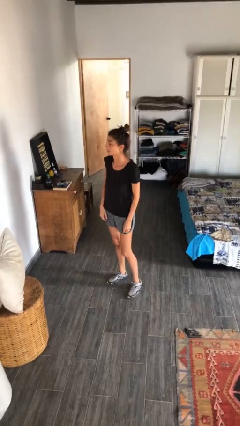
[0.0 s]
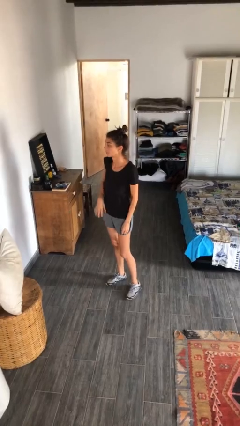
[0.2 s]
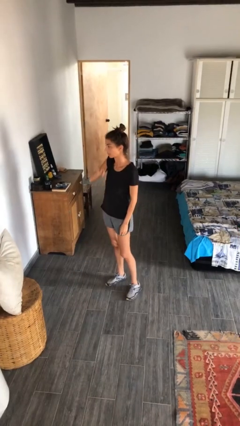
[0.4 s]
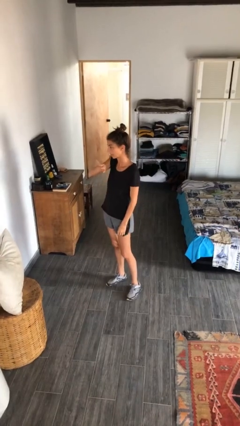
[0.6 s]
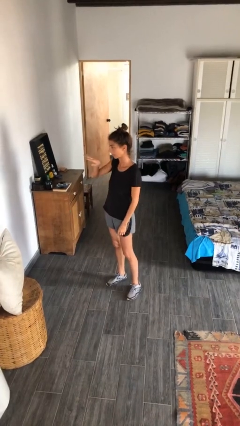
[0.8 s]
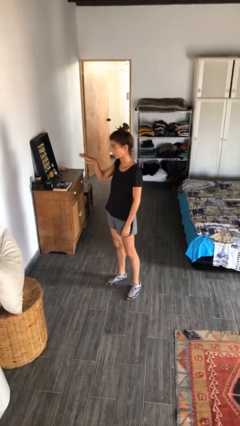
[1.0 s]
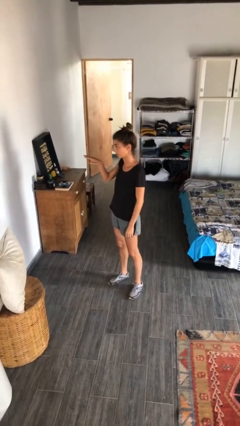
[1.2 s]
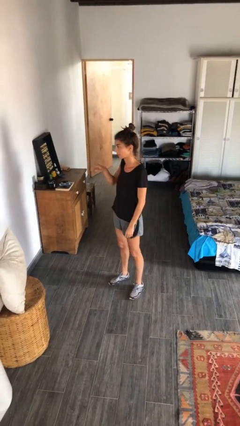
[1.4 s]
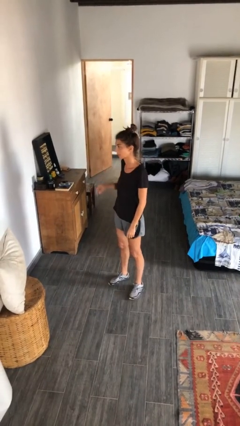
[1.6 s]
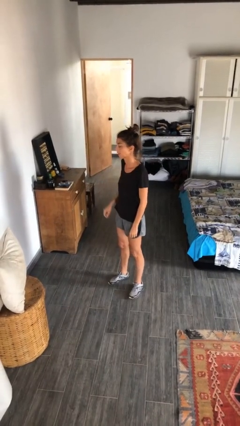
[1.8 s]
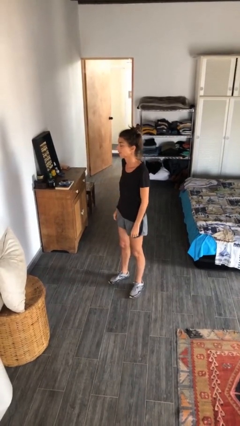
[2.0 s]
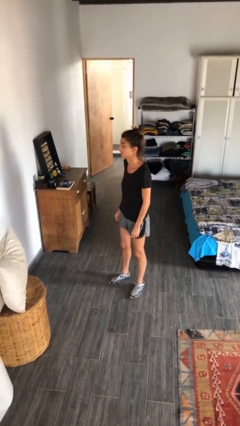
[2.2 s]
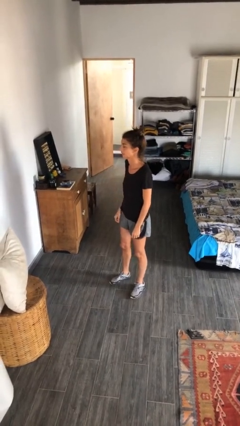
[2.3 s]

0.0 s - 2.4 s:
person gestures swipe right

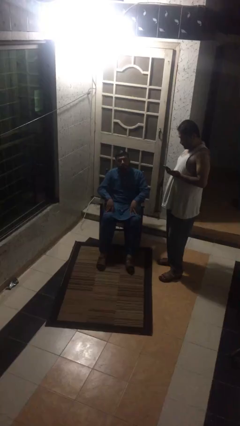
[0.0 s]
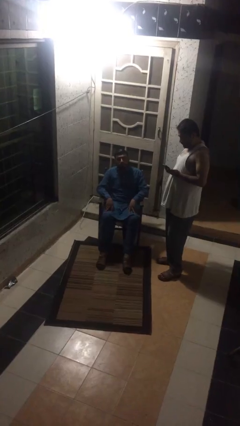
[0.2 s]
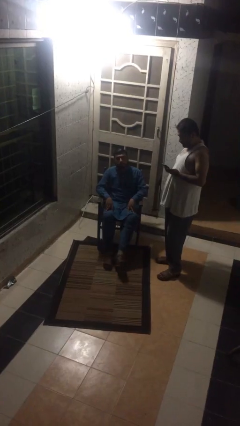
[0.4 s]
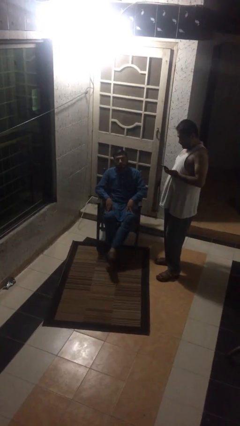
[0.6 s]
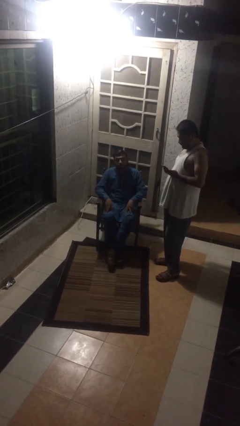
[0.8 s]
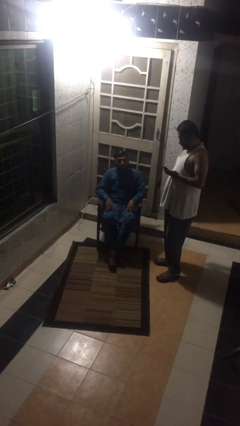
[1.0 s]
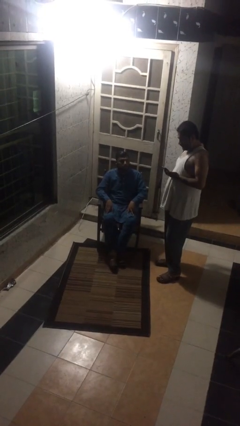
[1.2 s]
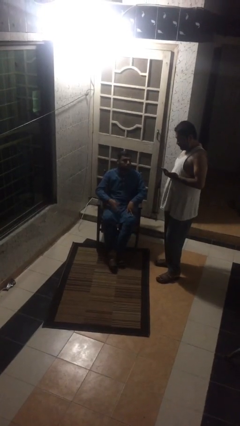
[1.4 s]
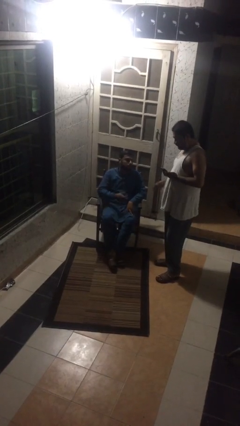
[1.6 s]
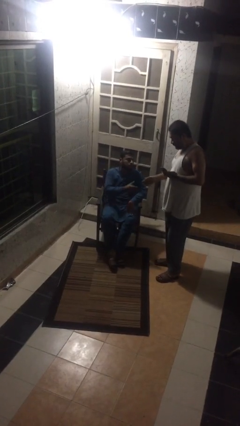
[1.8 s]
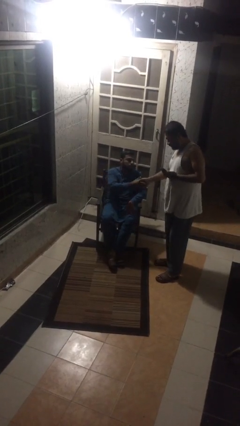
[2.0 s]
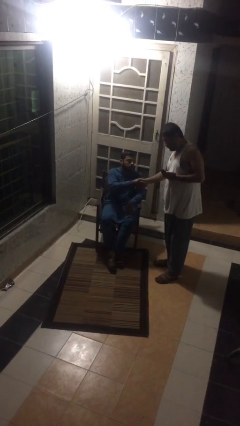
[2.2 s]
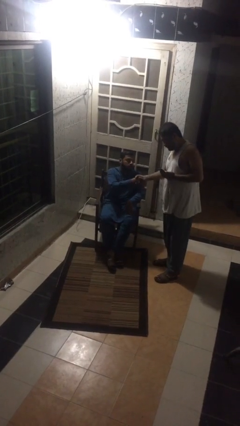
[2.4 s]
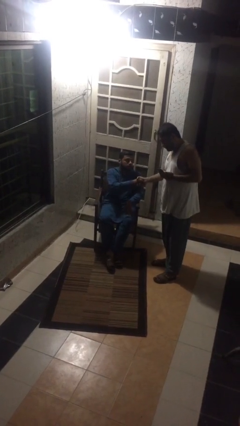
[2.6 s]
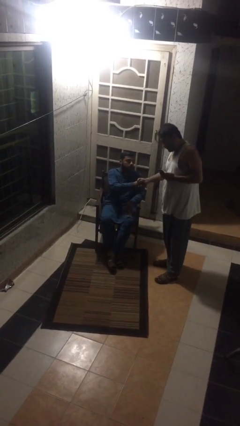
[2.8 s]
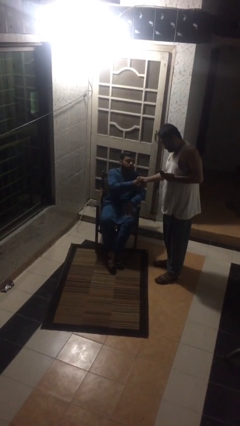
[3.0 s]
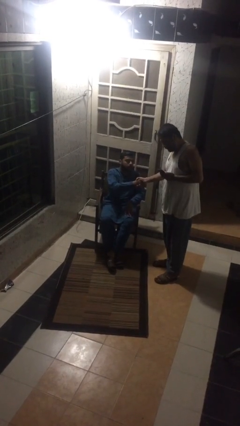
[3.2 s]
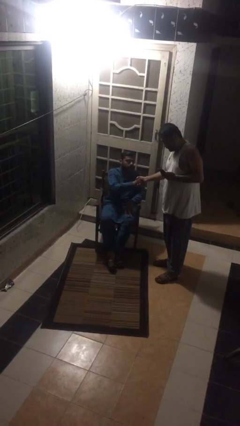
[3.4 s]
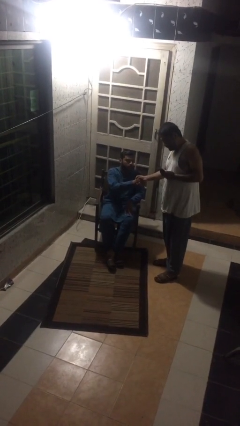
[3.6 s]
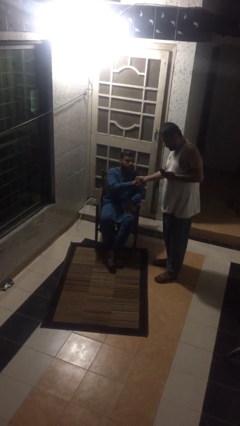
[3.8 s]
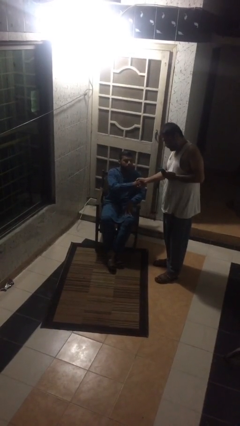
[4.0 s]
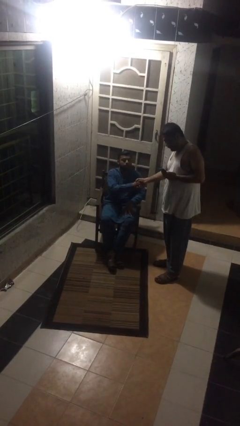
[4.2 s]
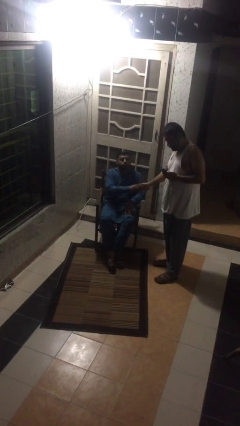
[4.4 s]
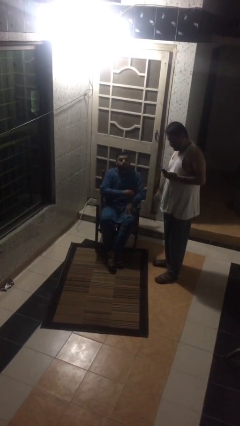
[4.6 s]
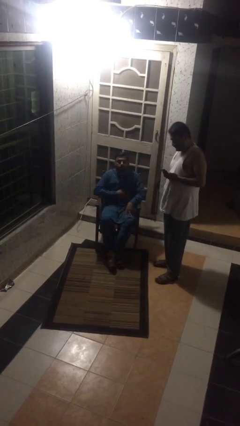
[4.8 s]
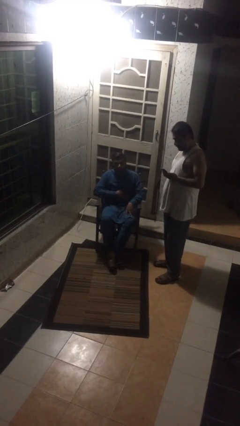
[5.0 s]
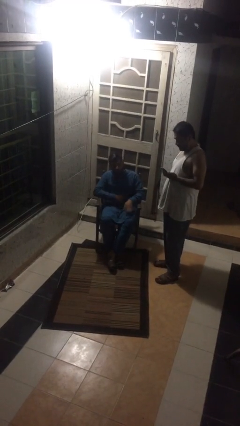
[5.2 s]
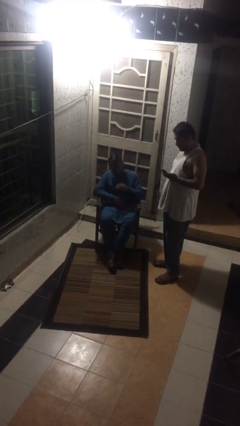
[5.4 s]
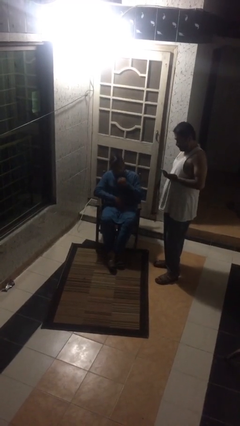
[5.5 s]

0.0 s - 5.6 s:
person shakes hand

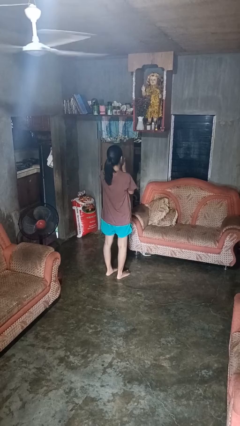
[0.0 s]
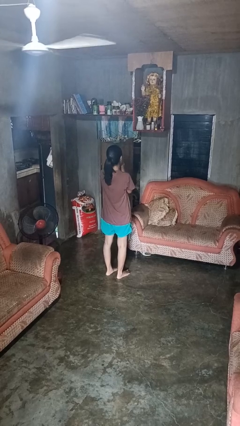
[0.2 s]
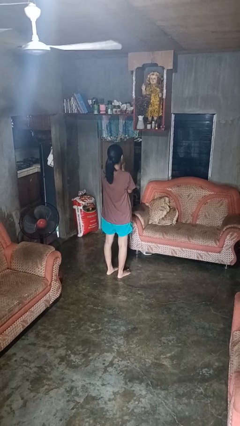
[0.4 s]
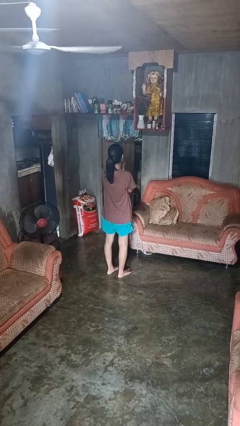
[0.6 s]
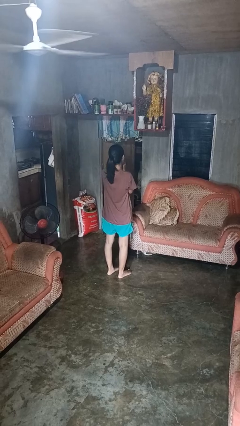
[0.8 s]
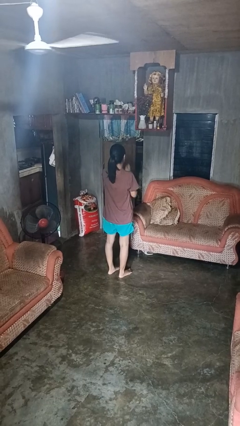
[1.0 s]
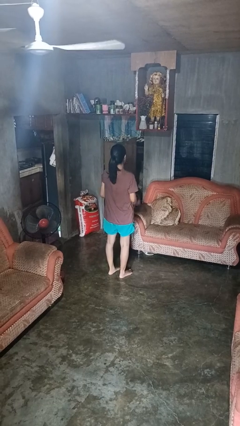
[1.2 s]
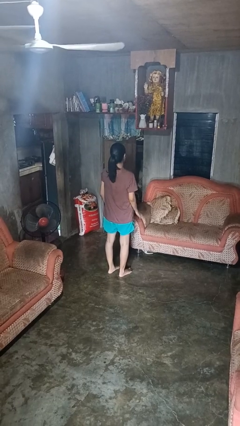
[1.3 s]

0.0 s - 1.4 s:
person prays

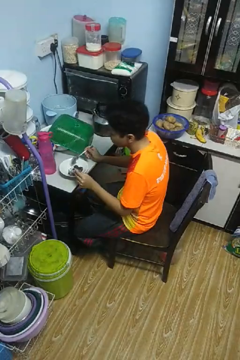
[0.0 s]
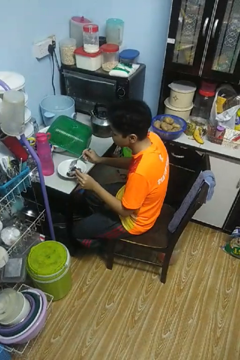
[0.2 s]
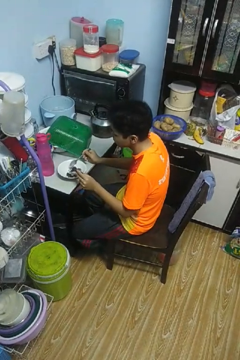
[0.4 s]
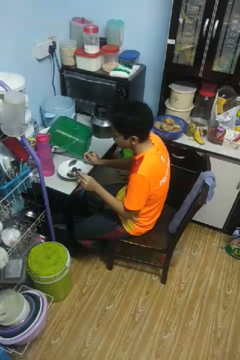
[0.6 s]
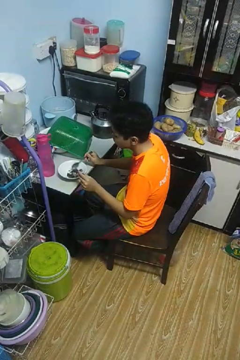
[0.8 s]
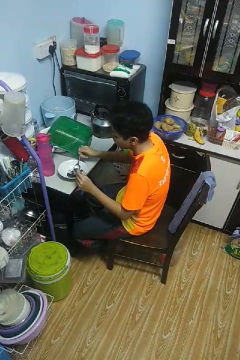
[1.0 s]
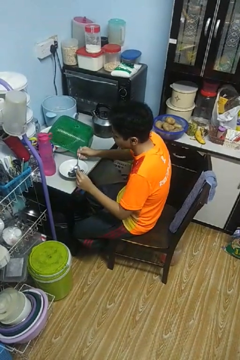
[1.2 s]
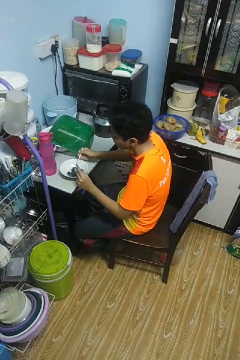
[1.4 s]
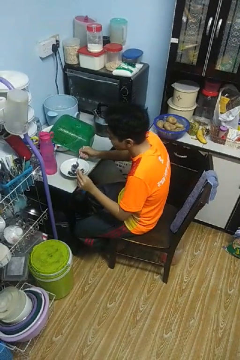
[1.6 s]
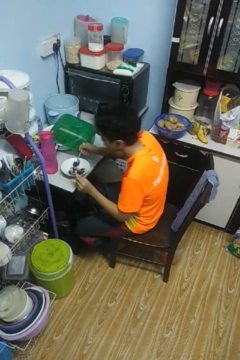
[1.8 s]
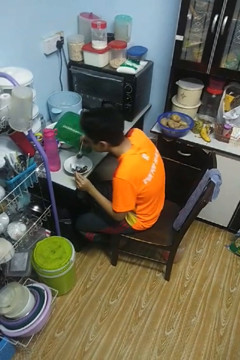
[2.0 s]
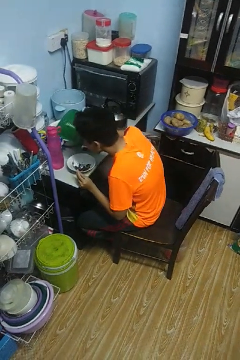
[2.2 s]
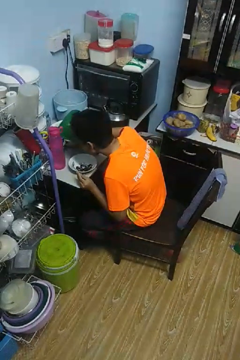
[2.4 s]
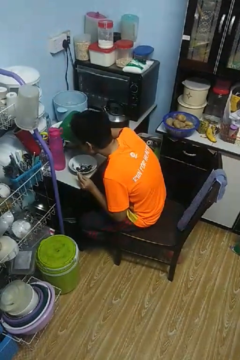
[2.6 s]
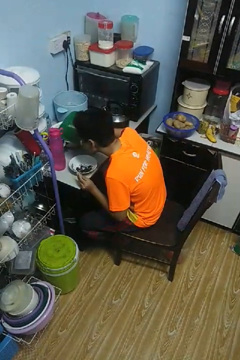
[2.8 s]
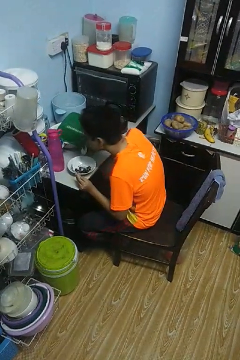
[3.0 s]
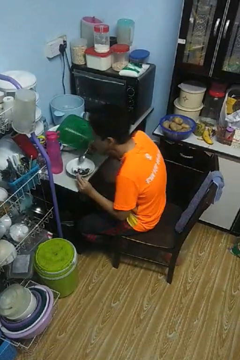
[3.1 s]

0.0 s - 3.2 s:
person eats with utensil

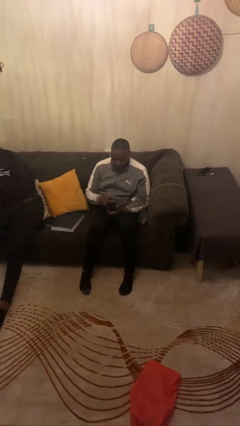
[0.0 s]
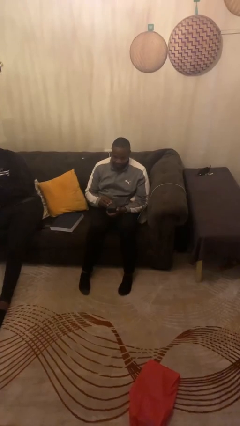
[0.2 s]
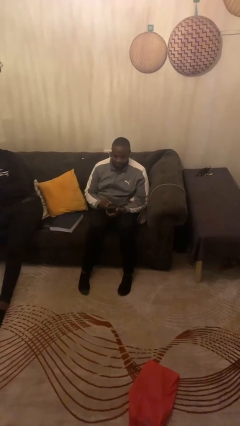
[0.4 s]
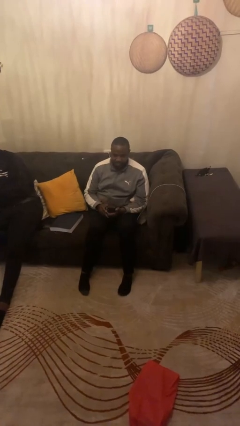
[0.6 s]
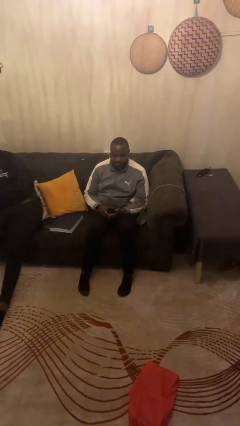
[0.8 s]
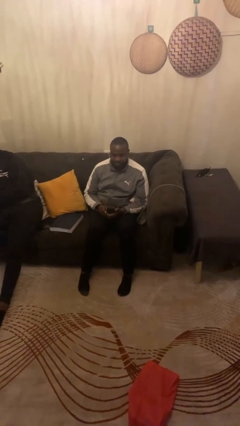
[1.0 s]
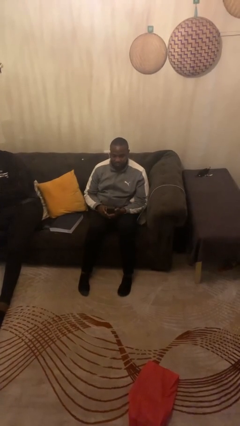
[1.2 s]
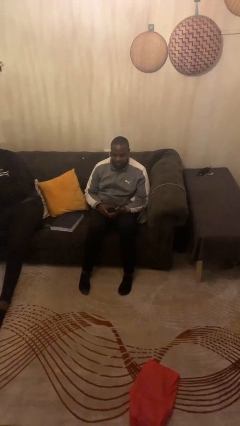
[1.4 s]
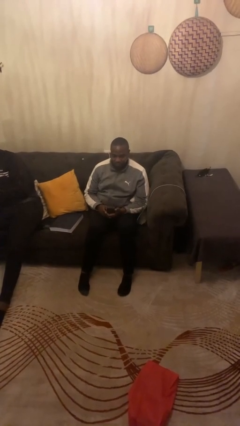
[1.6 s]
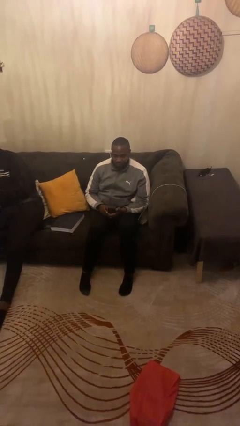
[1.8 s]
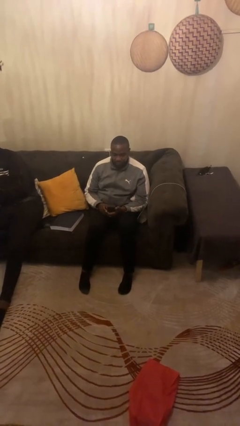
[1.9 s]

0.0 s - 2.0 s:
person closes jewelry box

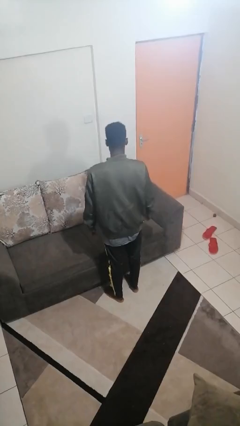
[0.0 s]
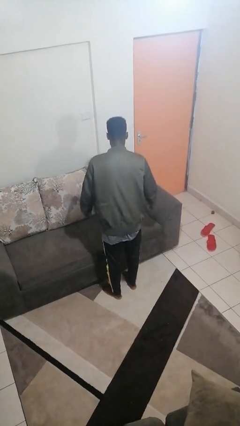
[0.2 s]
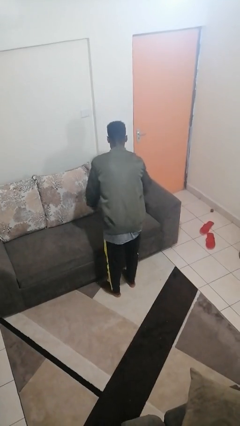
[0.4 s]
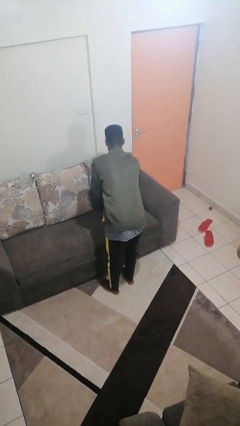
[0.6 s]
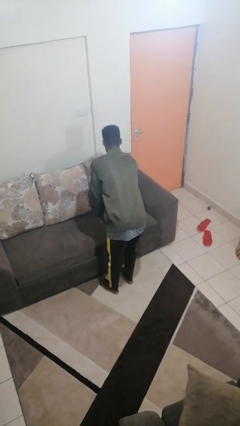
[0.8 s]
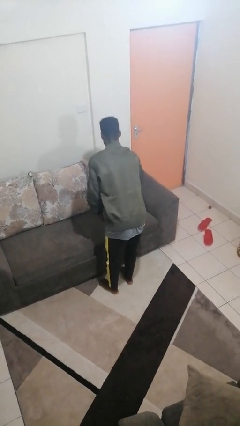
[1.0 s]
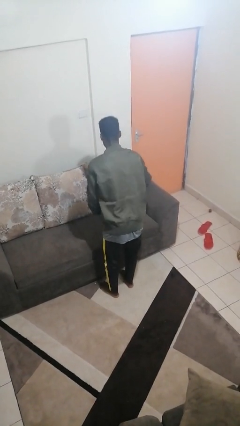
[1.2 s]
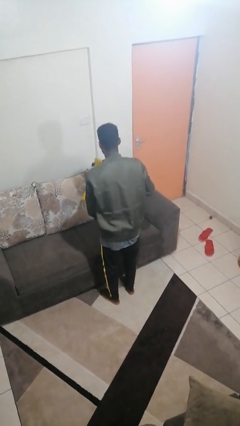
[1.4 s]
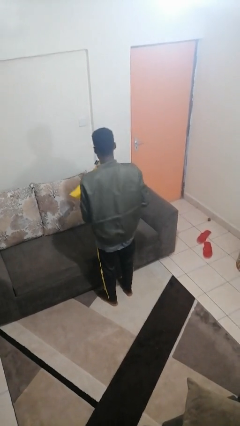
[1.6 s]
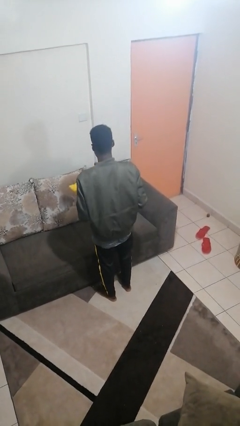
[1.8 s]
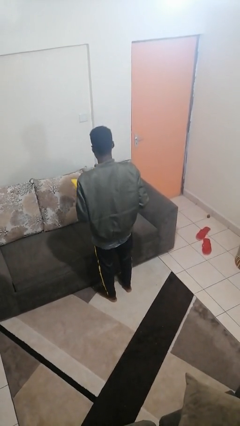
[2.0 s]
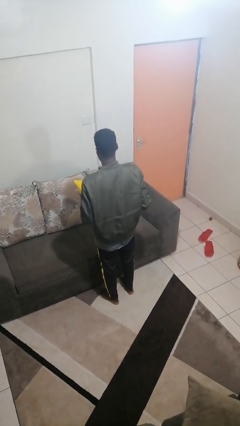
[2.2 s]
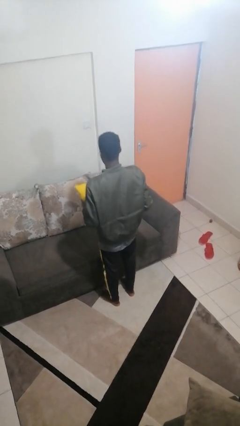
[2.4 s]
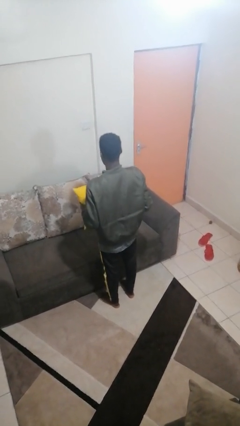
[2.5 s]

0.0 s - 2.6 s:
person picks up object from couch

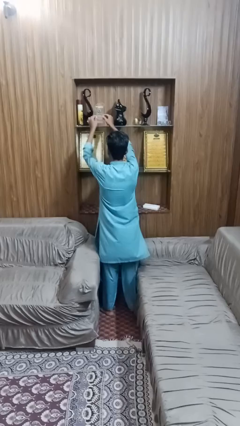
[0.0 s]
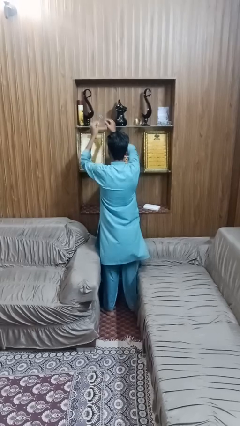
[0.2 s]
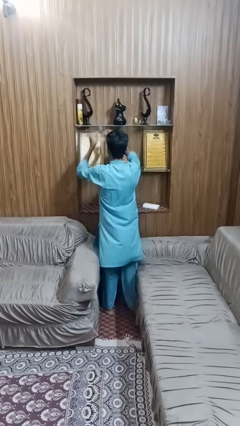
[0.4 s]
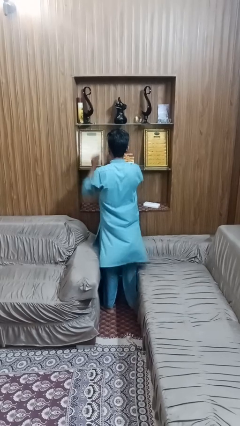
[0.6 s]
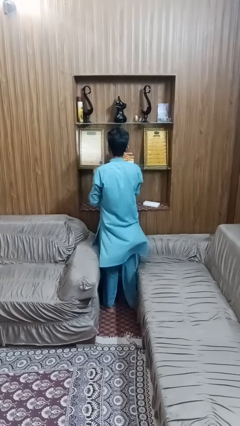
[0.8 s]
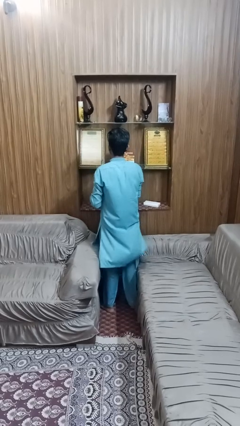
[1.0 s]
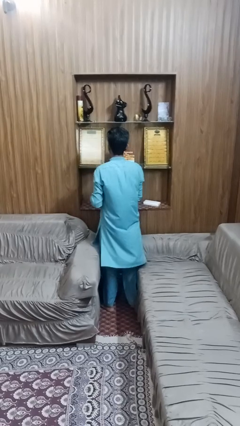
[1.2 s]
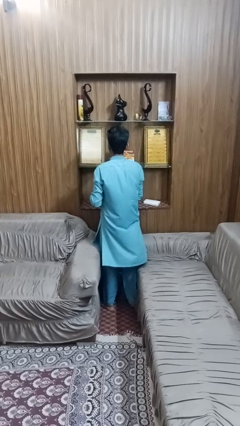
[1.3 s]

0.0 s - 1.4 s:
person picks up object from shelf
